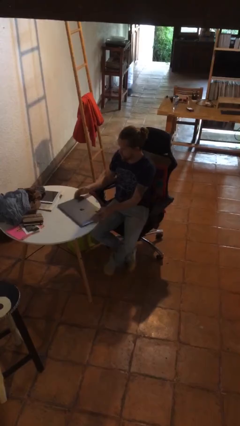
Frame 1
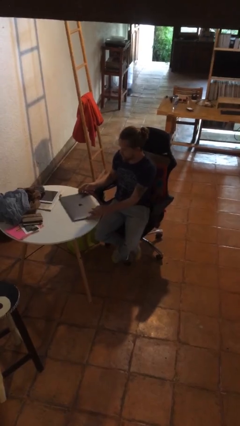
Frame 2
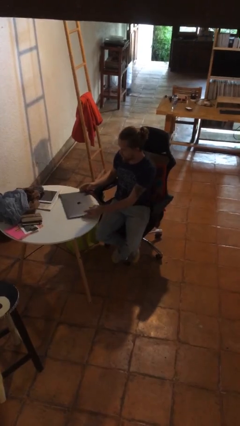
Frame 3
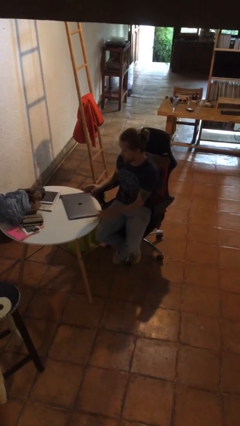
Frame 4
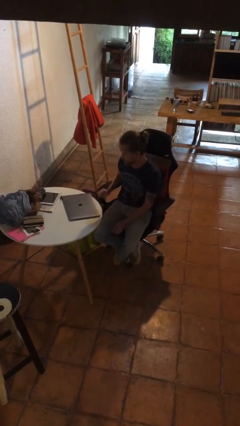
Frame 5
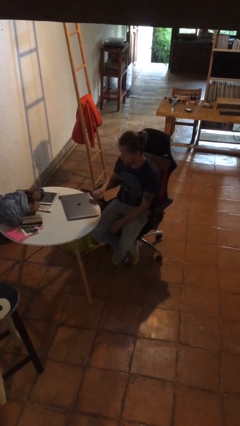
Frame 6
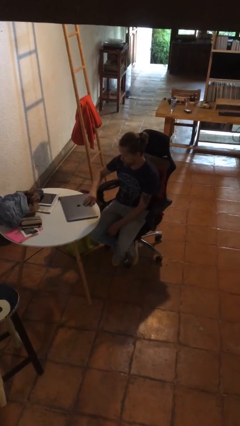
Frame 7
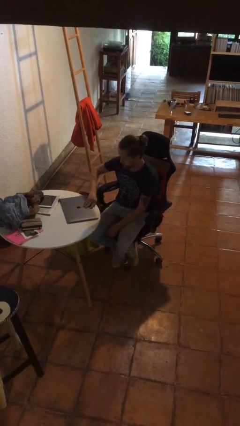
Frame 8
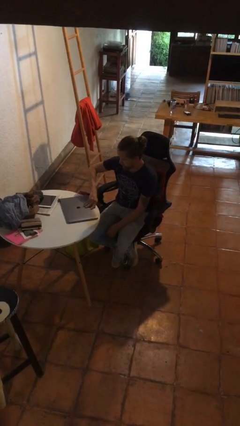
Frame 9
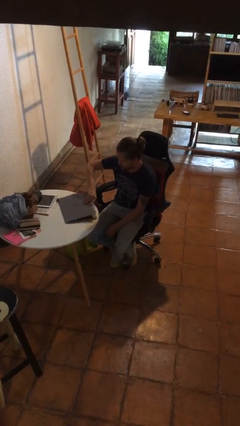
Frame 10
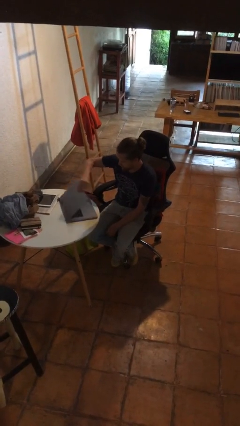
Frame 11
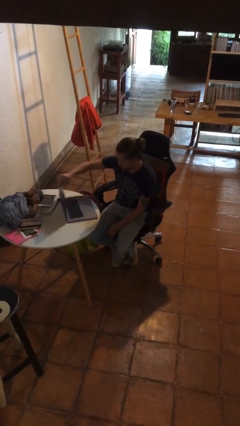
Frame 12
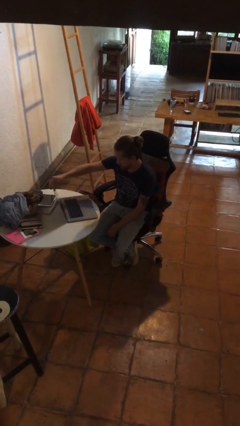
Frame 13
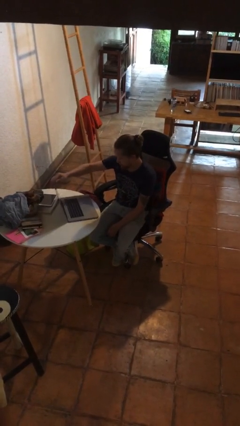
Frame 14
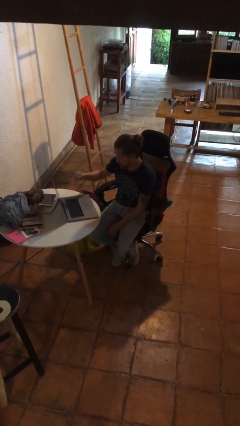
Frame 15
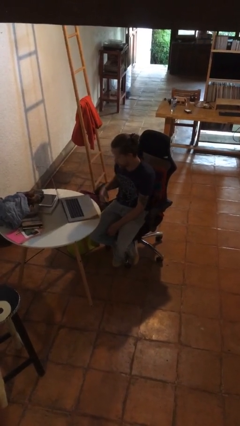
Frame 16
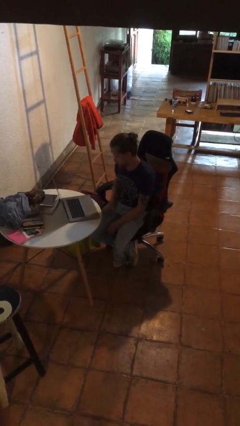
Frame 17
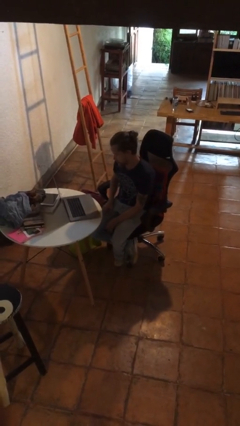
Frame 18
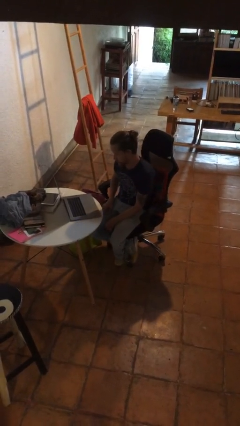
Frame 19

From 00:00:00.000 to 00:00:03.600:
person opens laptop

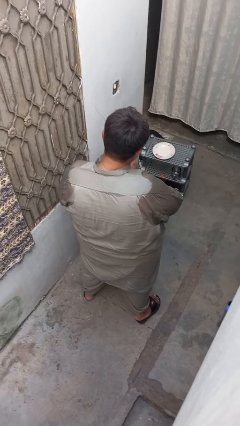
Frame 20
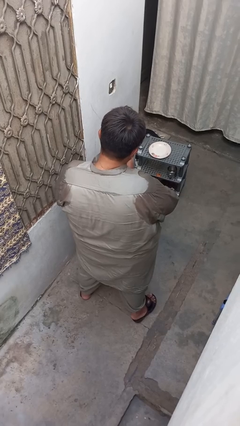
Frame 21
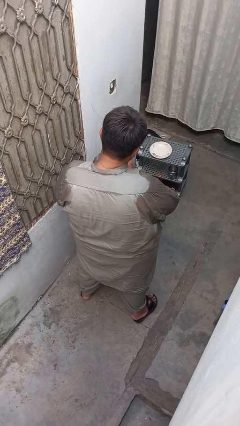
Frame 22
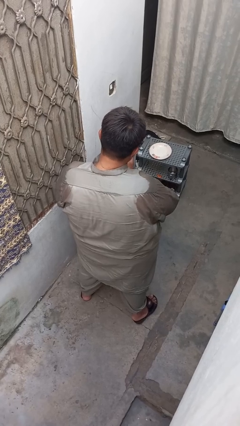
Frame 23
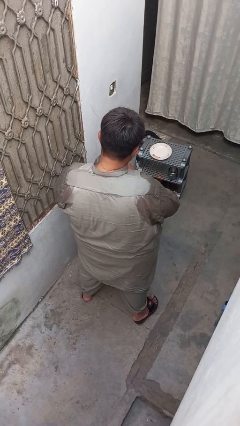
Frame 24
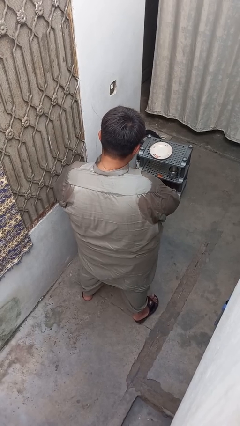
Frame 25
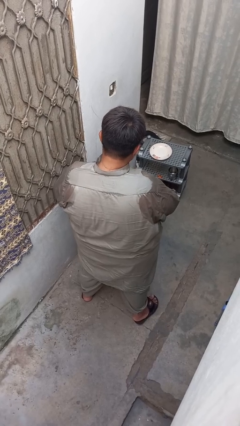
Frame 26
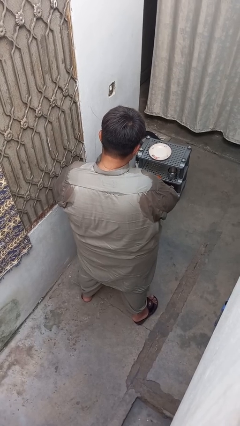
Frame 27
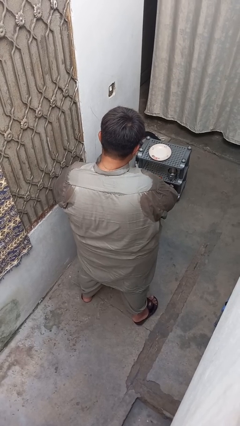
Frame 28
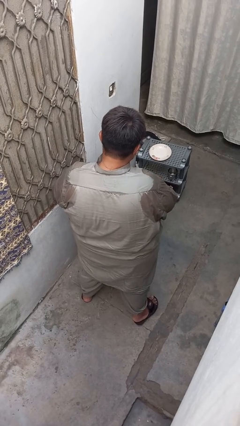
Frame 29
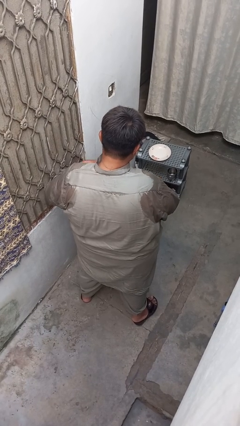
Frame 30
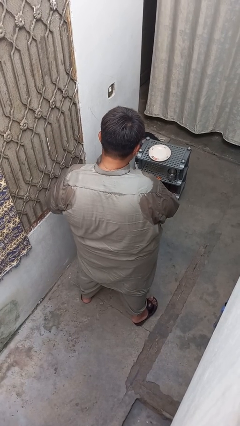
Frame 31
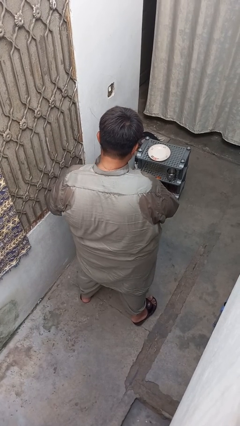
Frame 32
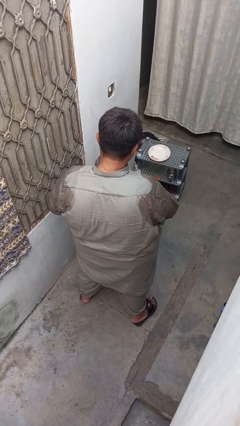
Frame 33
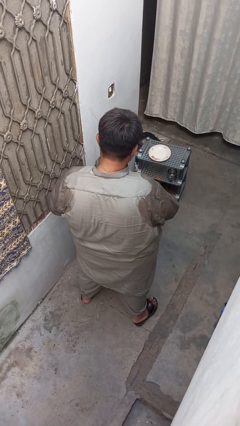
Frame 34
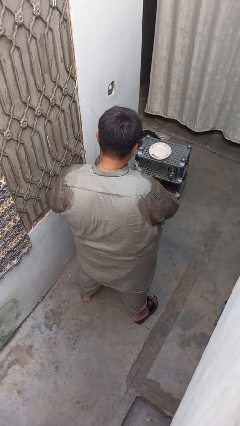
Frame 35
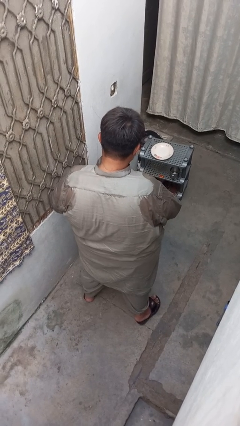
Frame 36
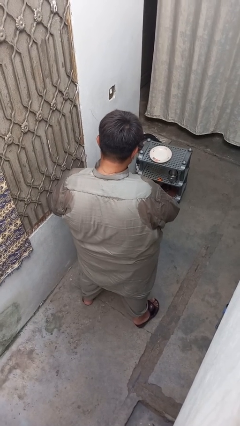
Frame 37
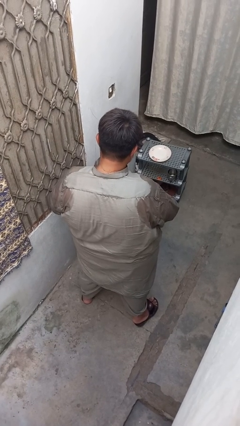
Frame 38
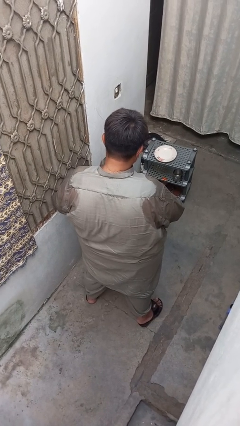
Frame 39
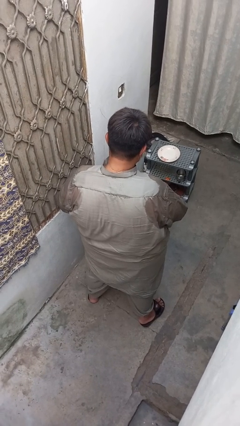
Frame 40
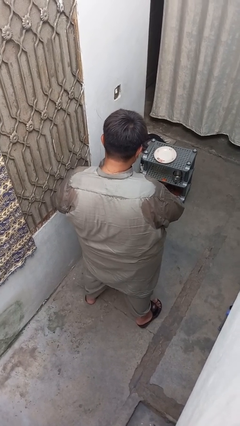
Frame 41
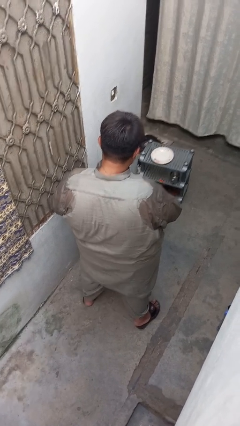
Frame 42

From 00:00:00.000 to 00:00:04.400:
person takes off wristwatch

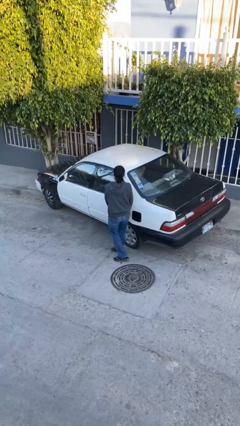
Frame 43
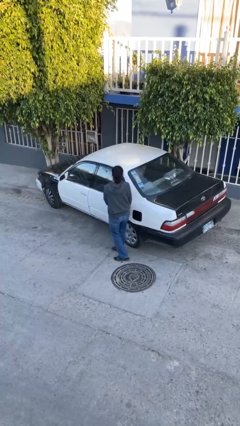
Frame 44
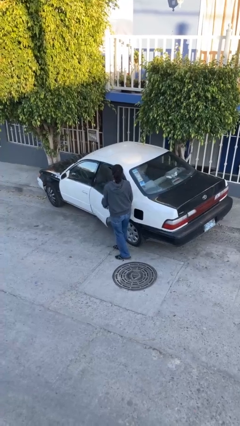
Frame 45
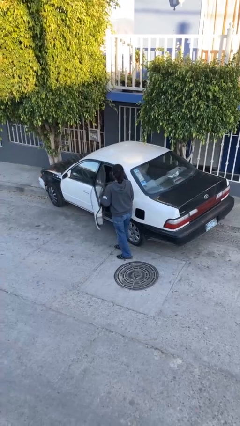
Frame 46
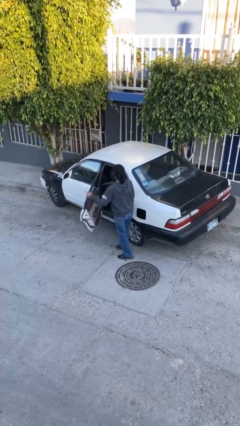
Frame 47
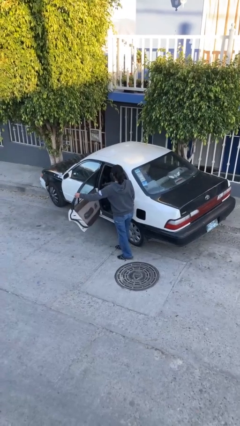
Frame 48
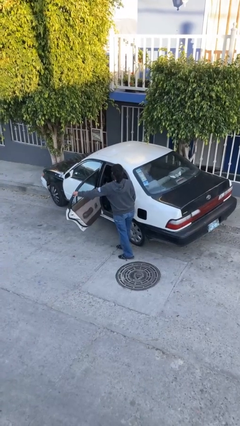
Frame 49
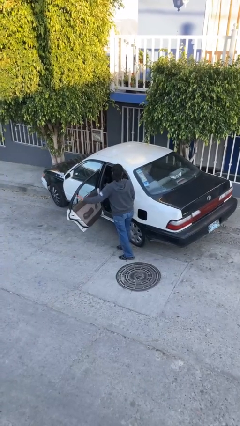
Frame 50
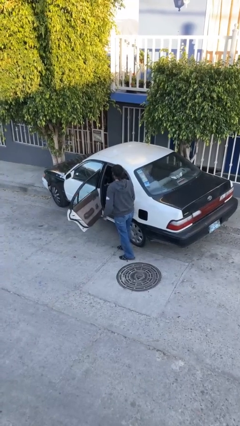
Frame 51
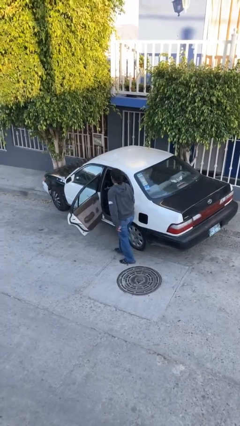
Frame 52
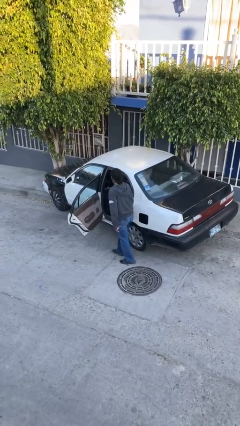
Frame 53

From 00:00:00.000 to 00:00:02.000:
person opens car door

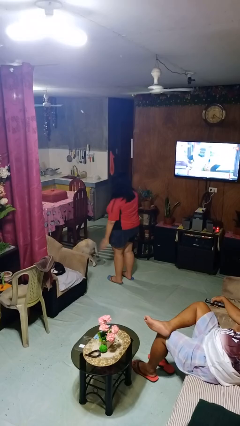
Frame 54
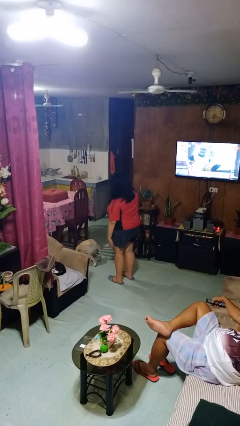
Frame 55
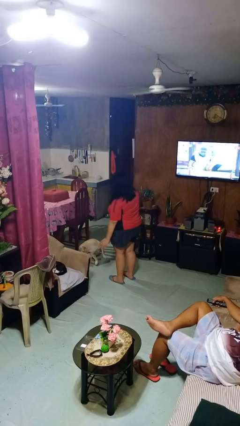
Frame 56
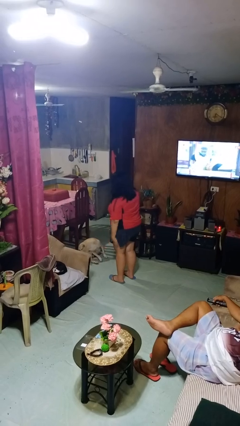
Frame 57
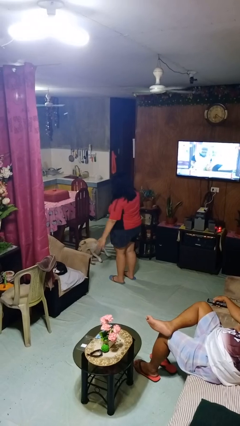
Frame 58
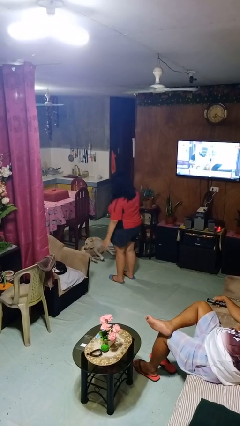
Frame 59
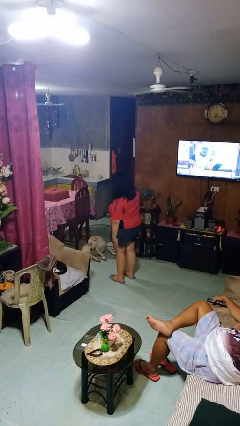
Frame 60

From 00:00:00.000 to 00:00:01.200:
person slaps hands on thighs

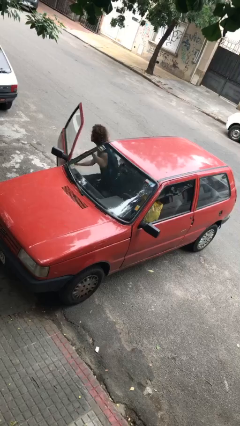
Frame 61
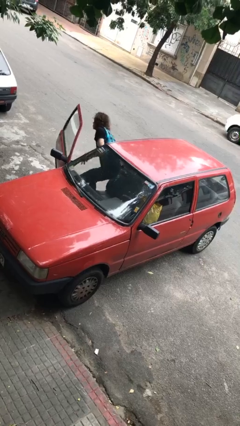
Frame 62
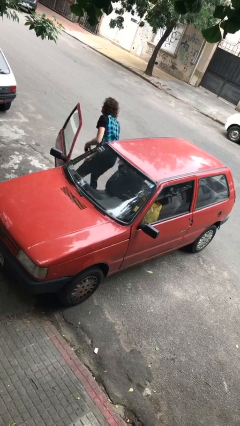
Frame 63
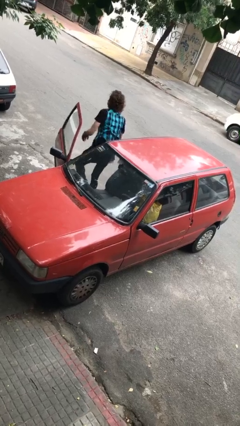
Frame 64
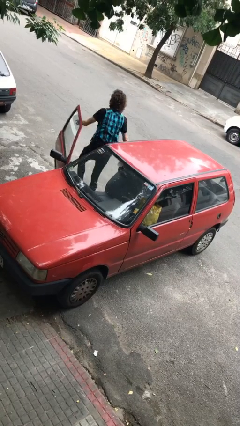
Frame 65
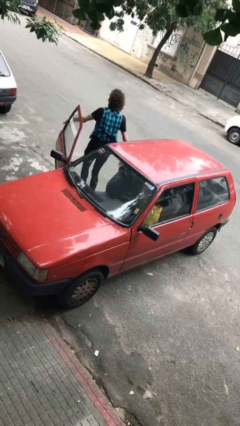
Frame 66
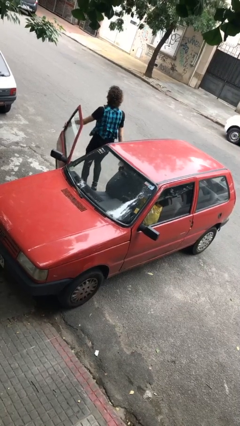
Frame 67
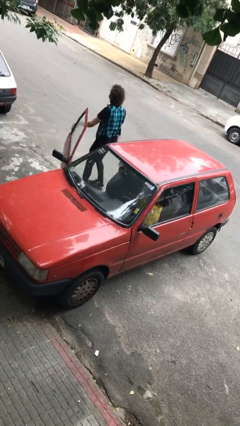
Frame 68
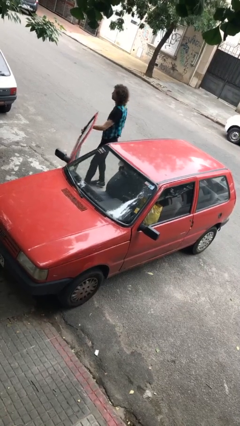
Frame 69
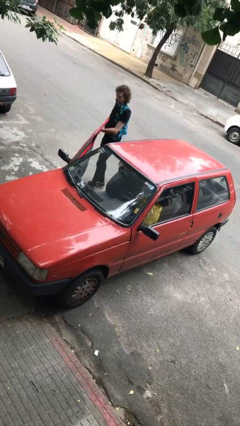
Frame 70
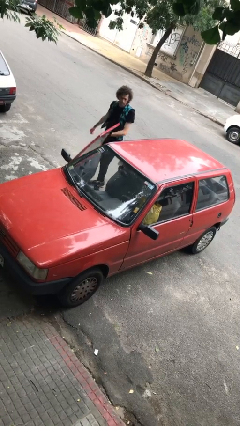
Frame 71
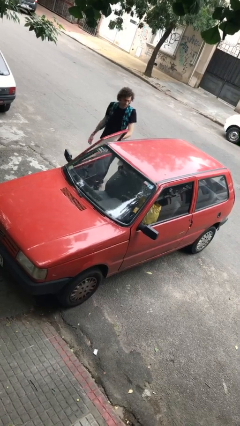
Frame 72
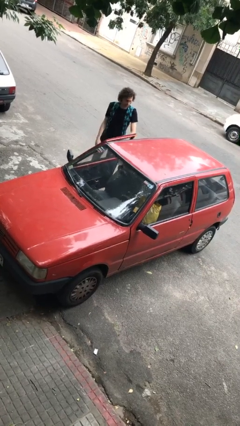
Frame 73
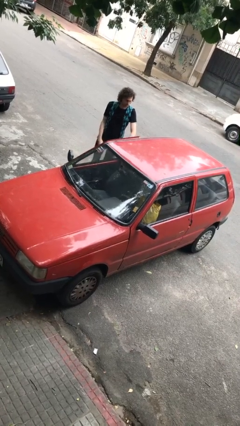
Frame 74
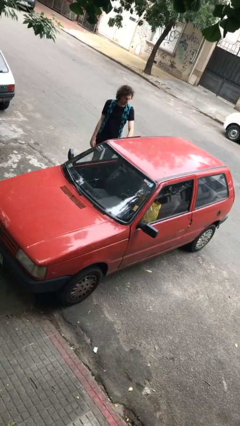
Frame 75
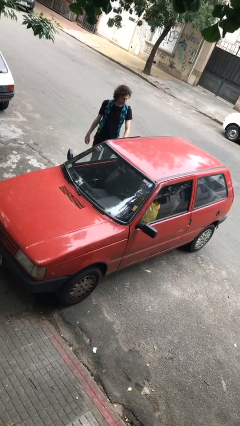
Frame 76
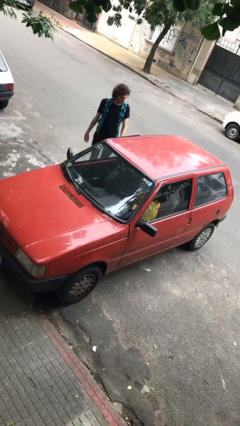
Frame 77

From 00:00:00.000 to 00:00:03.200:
car drops off person

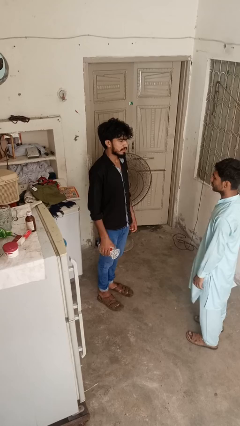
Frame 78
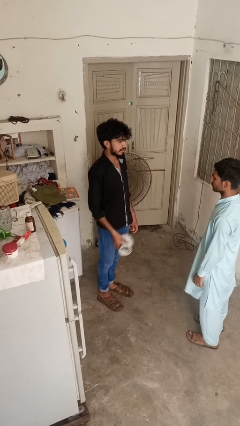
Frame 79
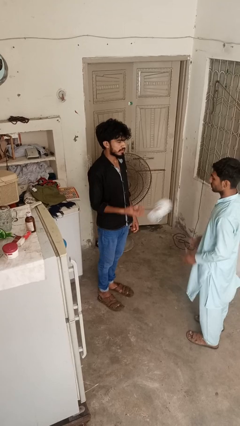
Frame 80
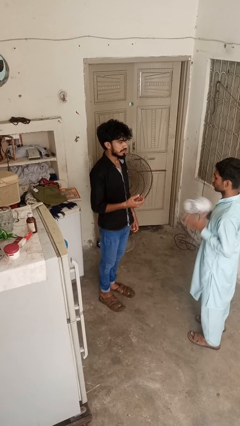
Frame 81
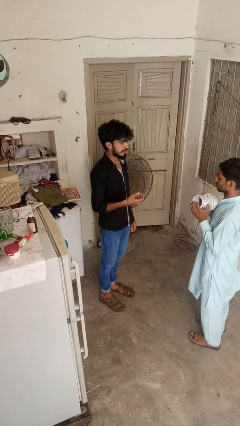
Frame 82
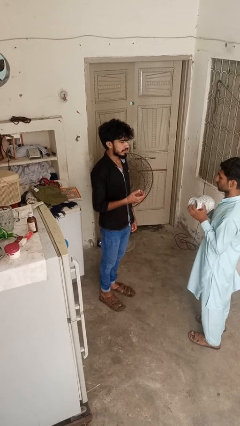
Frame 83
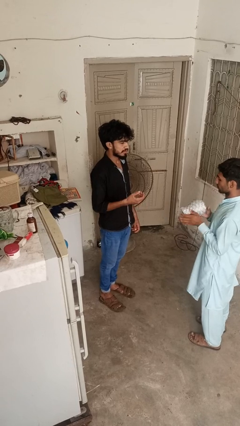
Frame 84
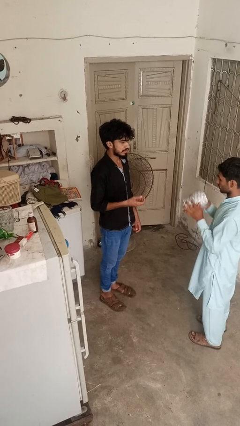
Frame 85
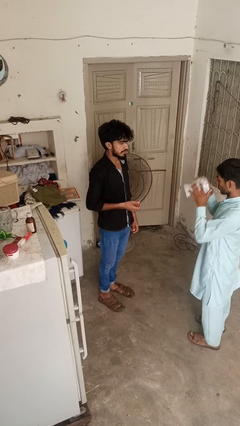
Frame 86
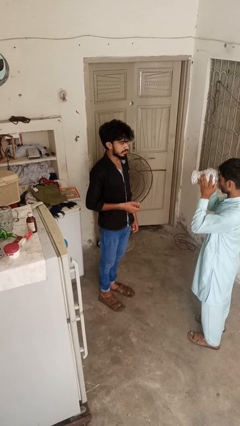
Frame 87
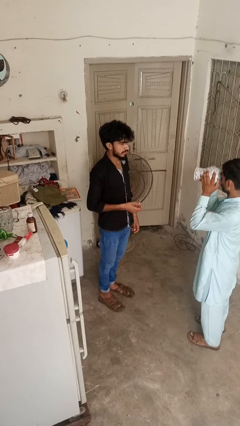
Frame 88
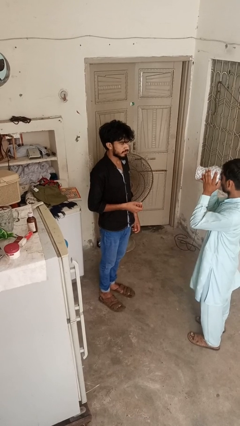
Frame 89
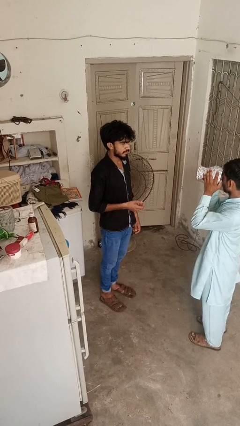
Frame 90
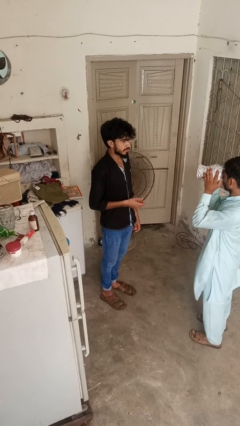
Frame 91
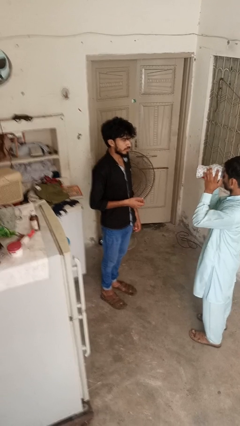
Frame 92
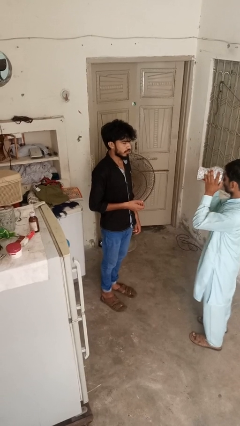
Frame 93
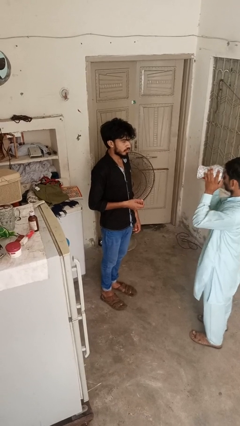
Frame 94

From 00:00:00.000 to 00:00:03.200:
person throws object to person
